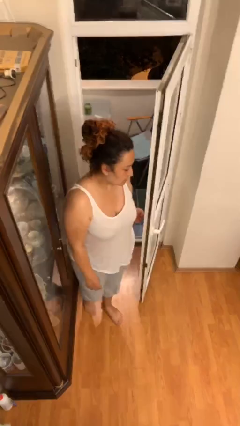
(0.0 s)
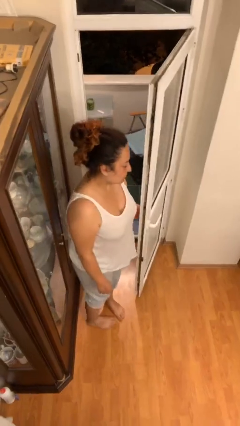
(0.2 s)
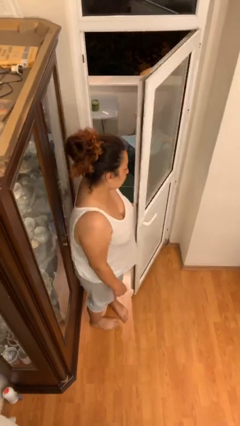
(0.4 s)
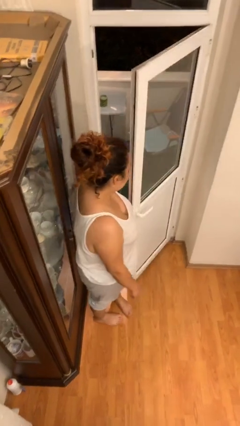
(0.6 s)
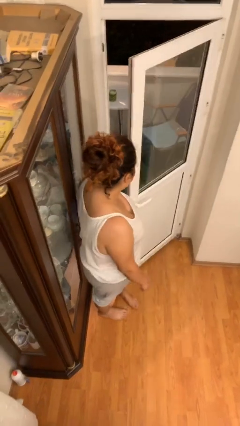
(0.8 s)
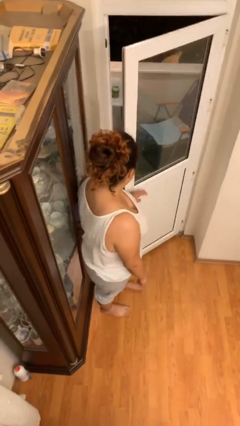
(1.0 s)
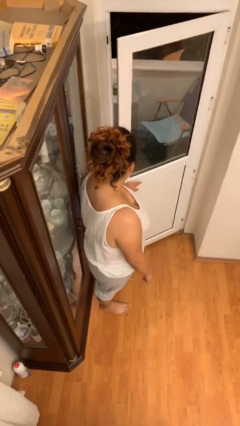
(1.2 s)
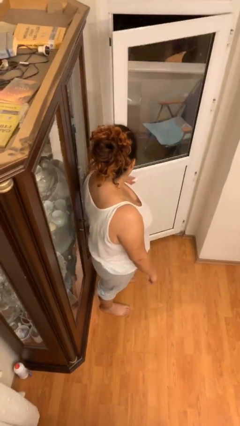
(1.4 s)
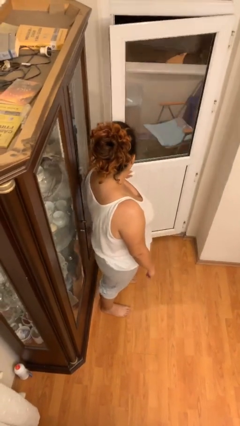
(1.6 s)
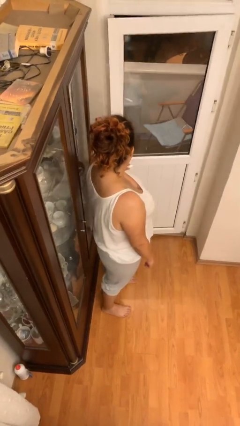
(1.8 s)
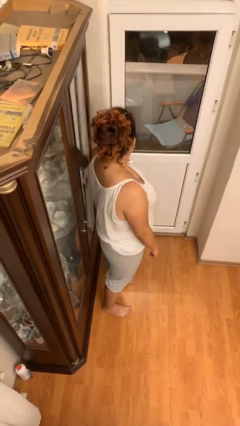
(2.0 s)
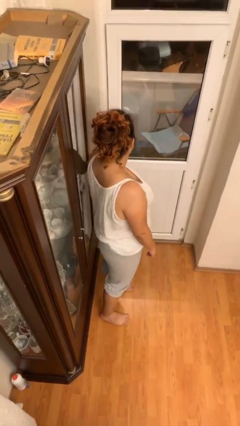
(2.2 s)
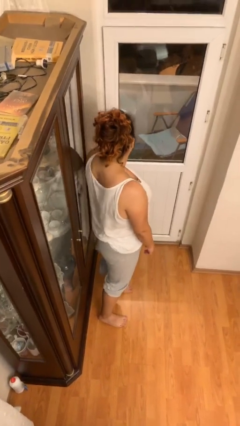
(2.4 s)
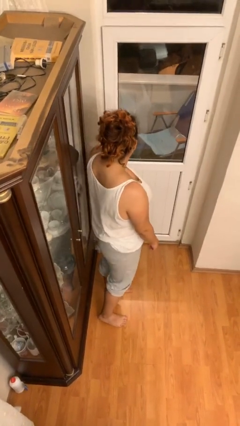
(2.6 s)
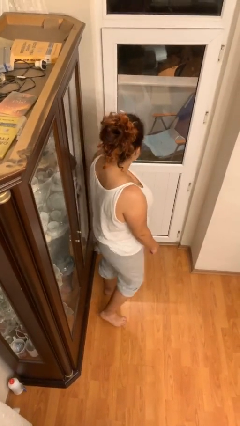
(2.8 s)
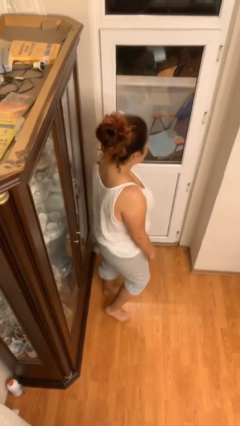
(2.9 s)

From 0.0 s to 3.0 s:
person closes facility door

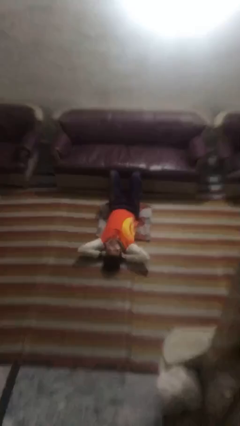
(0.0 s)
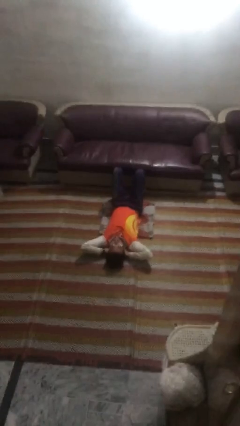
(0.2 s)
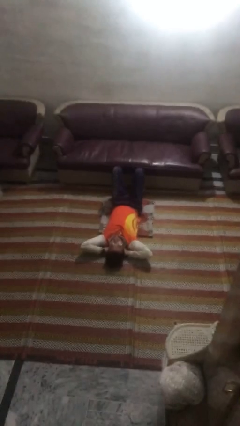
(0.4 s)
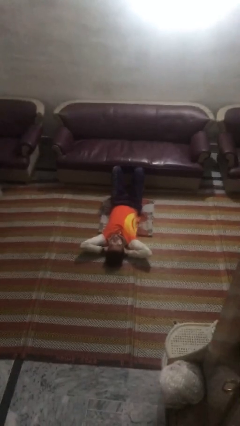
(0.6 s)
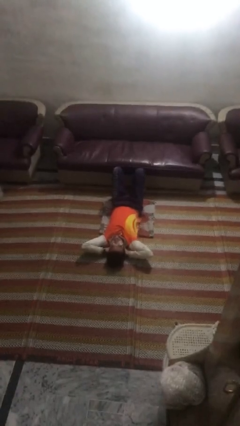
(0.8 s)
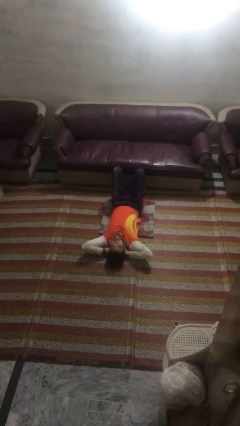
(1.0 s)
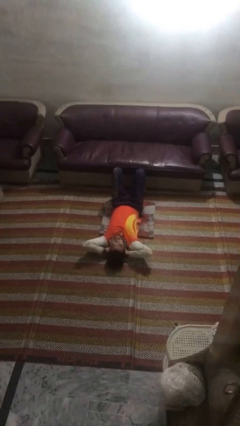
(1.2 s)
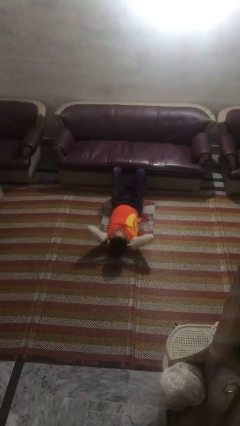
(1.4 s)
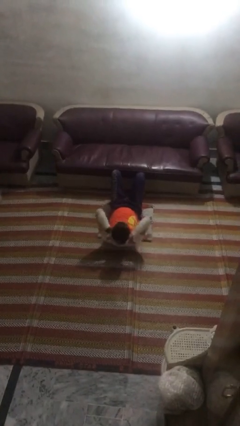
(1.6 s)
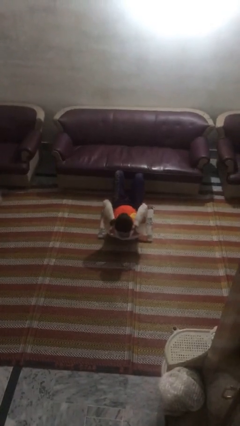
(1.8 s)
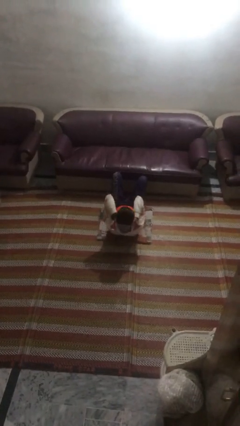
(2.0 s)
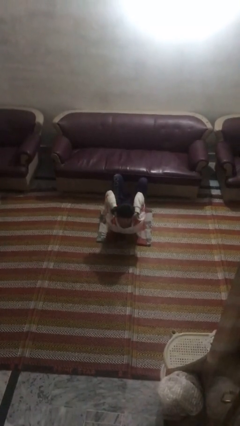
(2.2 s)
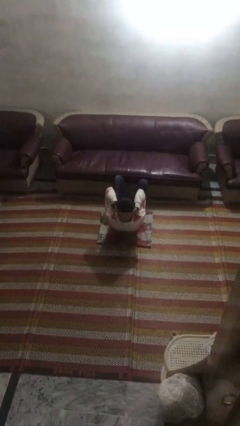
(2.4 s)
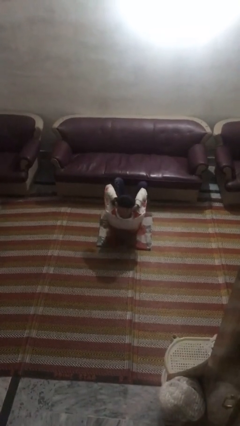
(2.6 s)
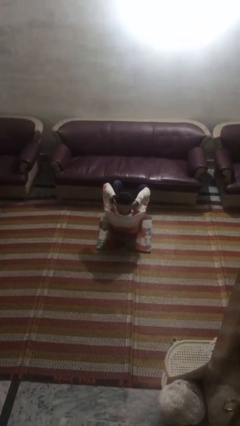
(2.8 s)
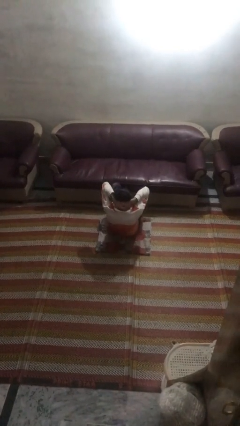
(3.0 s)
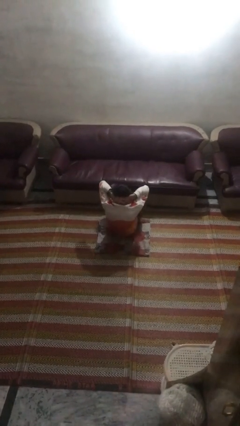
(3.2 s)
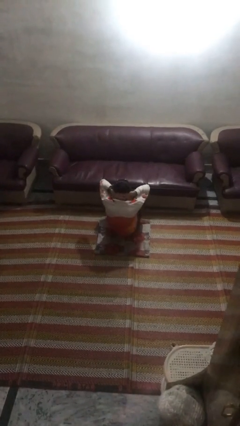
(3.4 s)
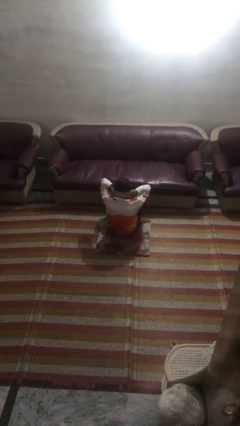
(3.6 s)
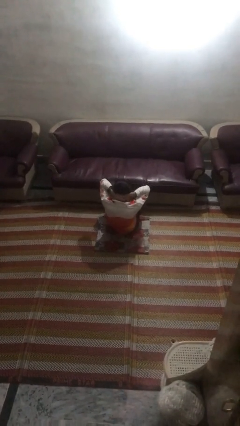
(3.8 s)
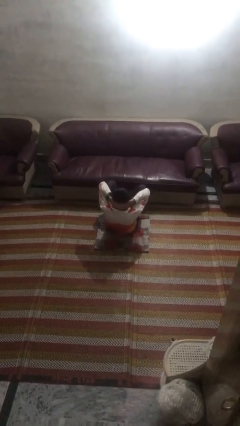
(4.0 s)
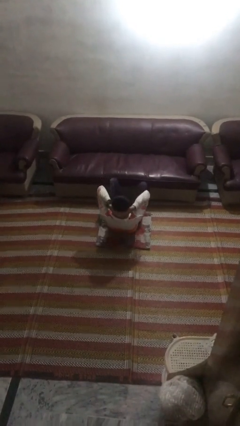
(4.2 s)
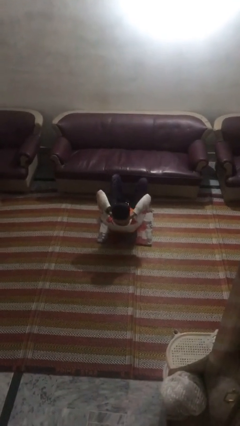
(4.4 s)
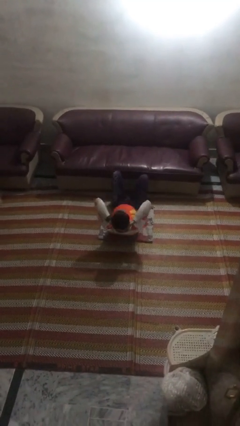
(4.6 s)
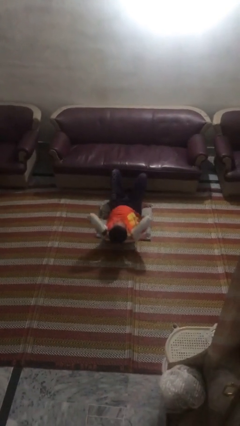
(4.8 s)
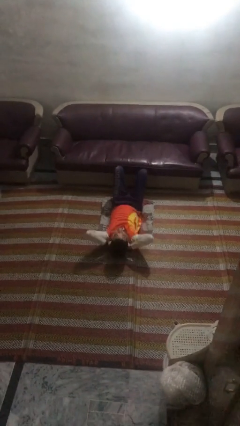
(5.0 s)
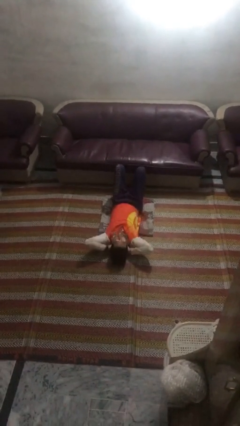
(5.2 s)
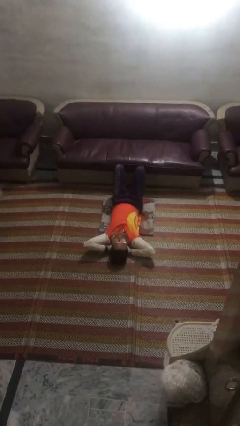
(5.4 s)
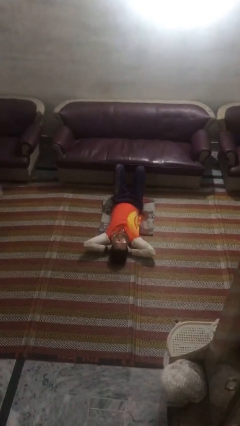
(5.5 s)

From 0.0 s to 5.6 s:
person exercises with situp

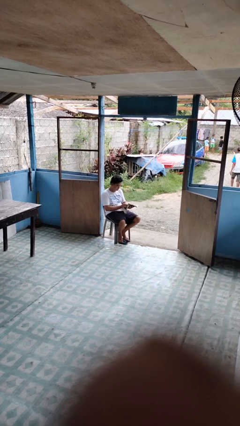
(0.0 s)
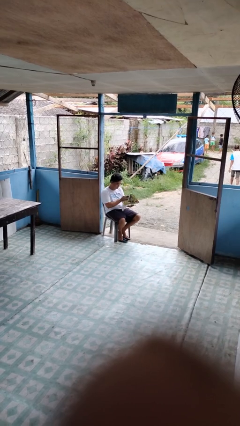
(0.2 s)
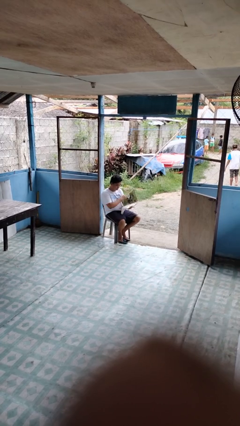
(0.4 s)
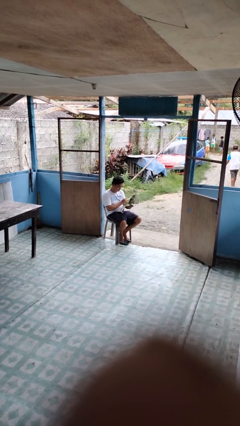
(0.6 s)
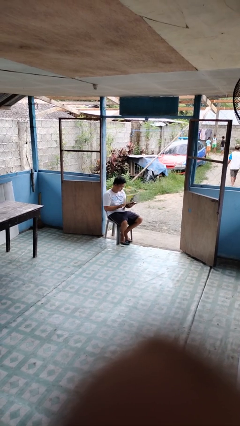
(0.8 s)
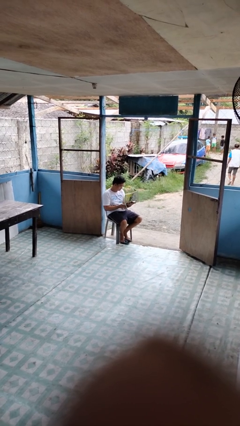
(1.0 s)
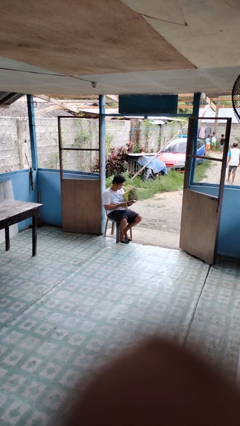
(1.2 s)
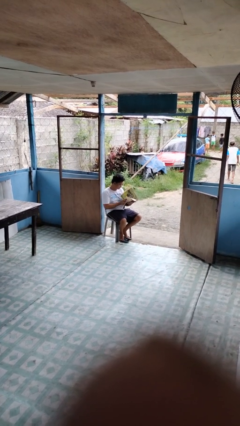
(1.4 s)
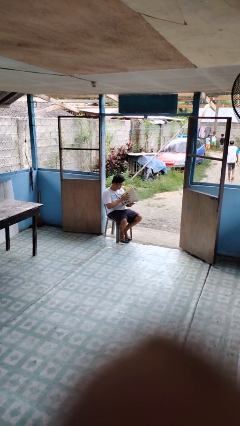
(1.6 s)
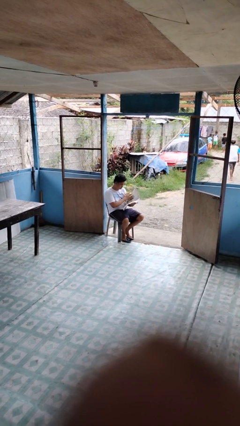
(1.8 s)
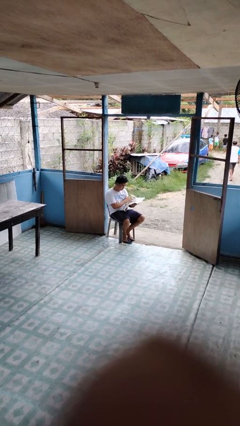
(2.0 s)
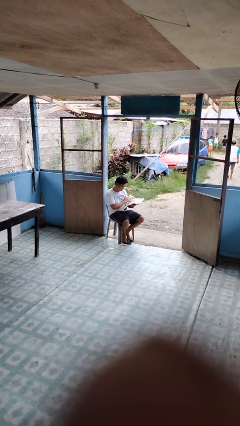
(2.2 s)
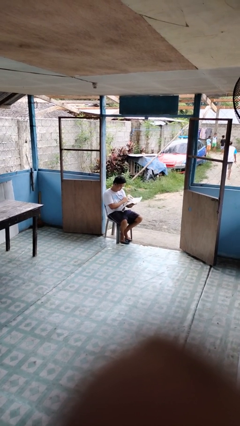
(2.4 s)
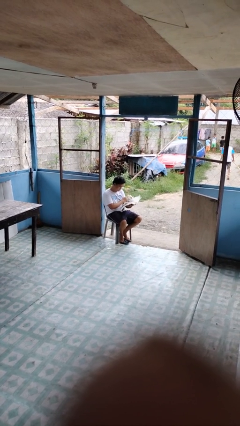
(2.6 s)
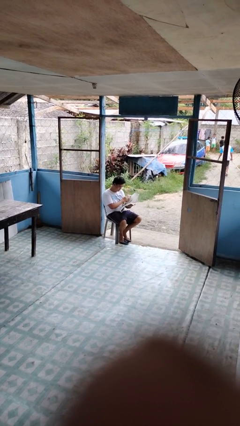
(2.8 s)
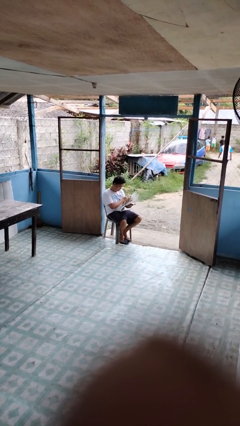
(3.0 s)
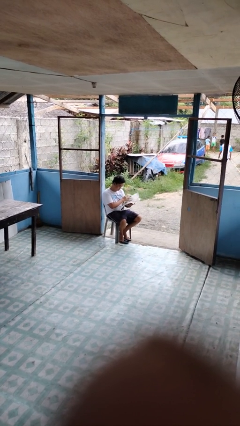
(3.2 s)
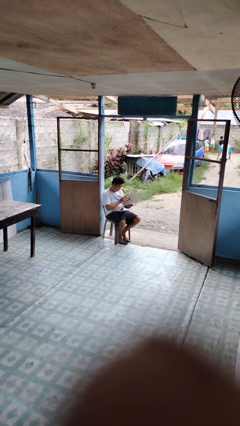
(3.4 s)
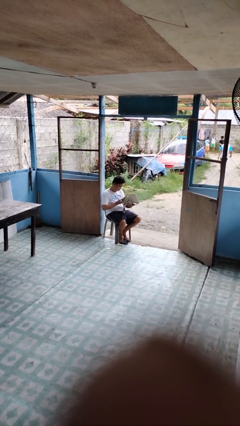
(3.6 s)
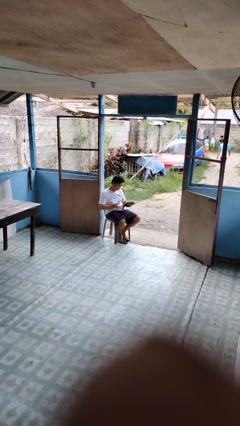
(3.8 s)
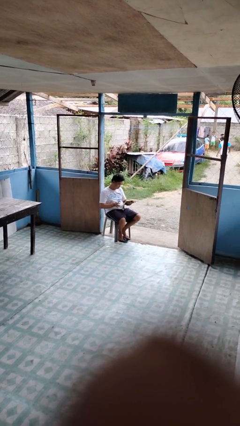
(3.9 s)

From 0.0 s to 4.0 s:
person reads newspaper

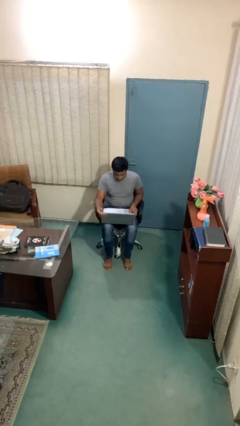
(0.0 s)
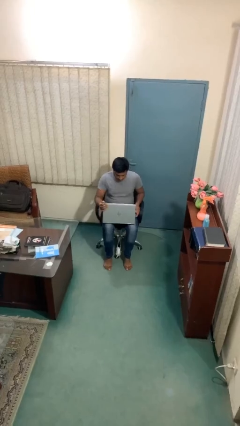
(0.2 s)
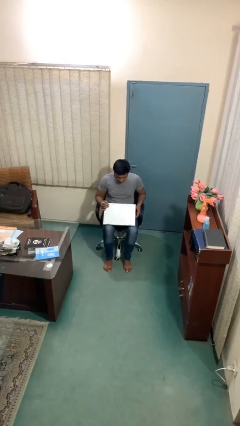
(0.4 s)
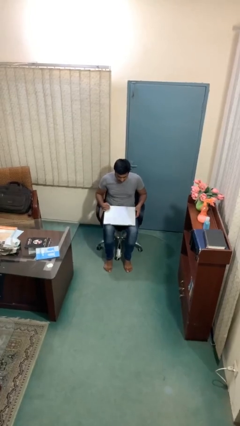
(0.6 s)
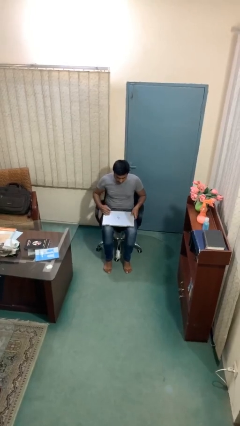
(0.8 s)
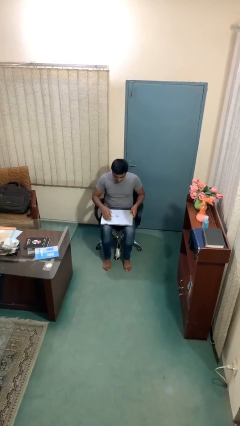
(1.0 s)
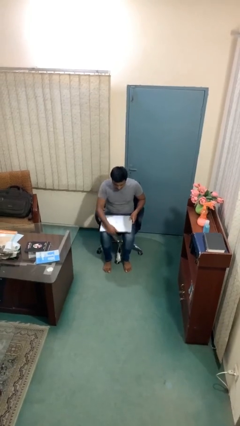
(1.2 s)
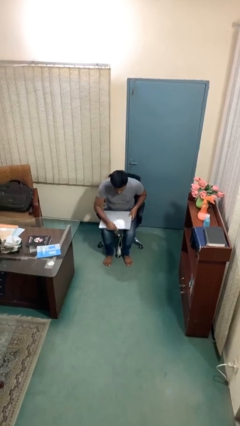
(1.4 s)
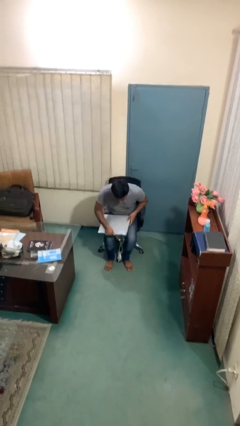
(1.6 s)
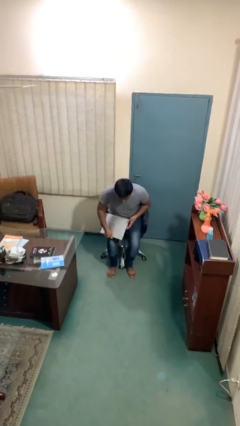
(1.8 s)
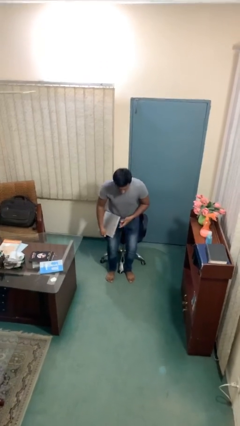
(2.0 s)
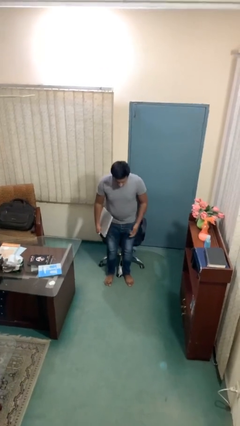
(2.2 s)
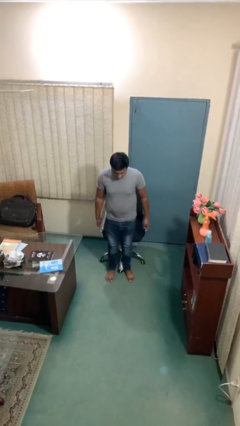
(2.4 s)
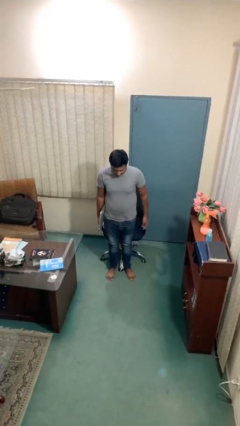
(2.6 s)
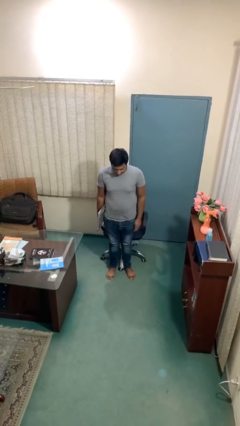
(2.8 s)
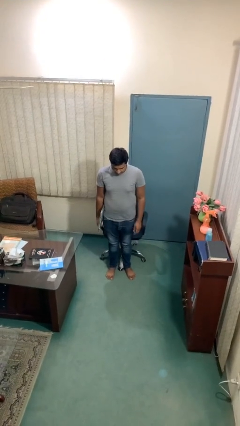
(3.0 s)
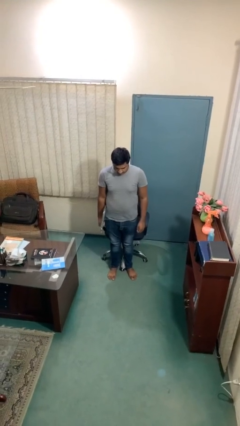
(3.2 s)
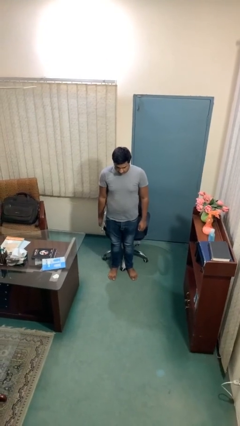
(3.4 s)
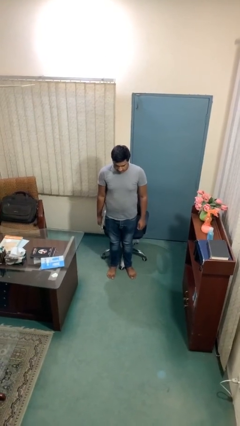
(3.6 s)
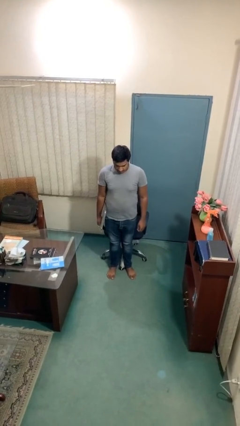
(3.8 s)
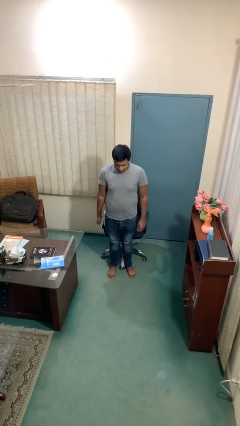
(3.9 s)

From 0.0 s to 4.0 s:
person stands up

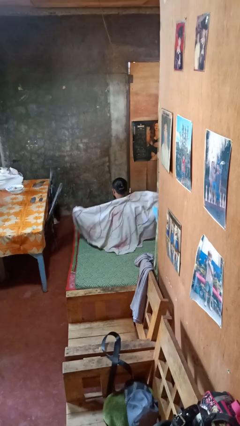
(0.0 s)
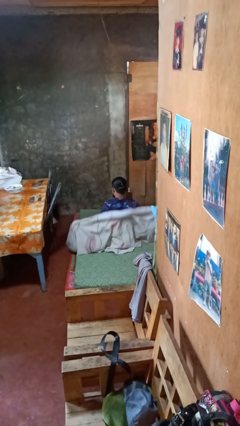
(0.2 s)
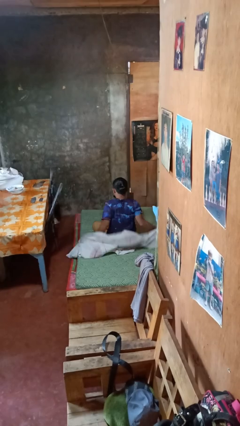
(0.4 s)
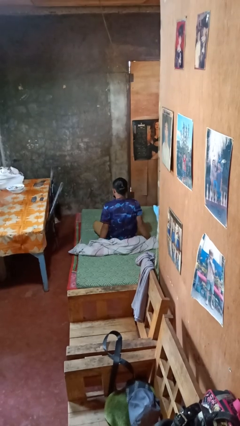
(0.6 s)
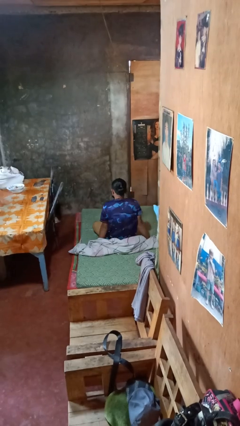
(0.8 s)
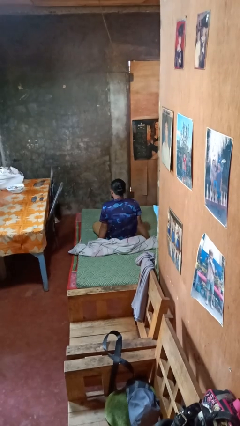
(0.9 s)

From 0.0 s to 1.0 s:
person uncovers with blanket
